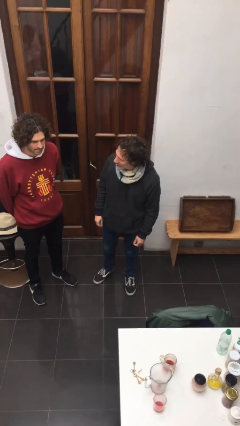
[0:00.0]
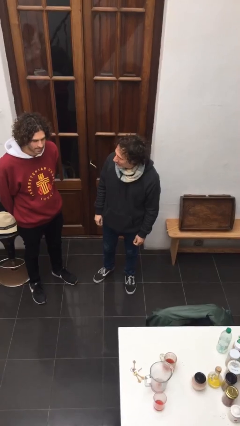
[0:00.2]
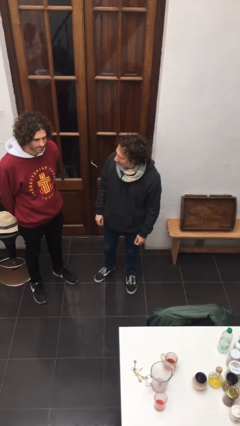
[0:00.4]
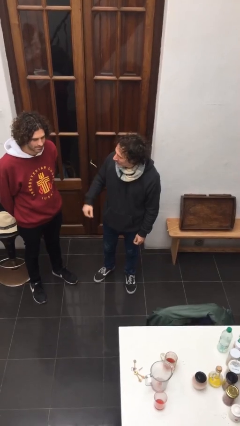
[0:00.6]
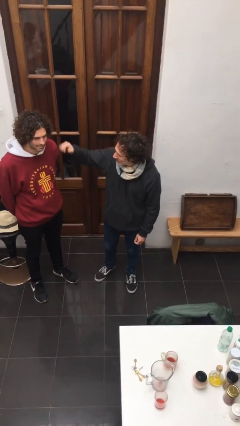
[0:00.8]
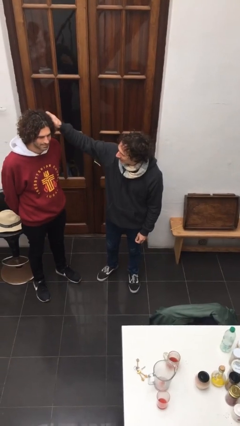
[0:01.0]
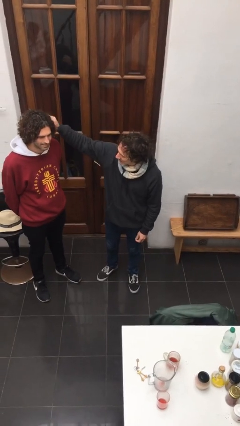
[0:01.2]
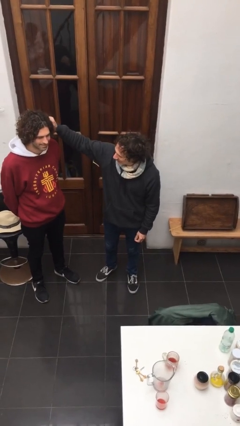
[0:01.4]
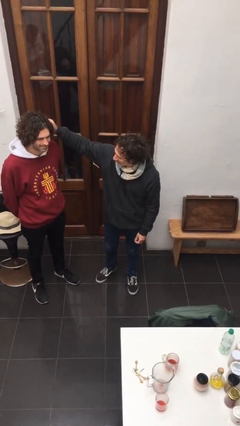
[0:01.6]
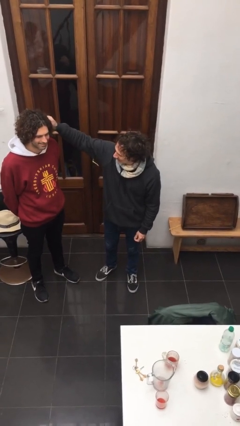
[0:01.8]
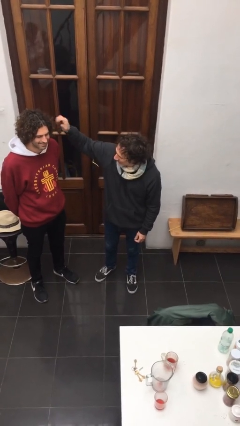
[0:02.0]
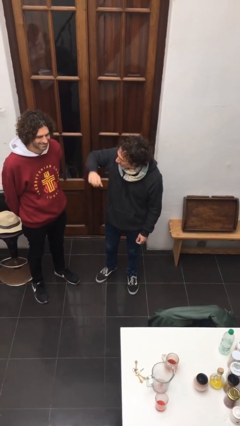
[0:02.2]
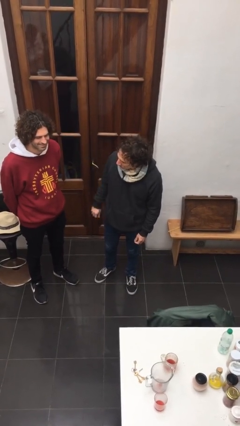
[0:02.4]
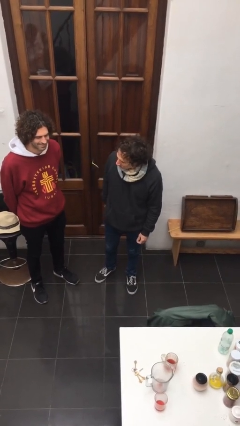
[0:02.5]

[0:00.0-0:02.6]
person grabs person by hair

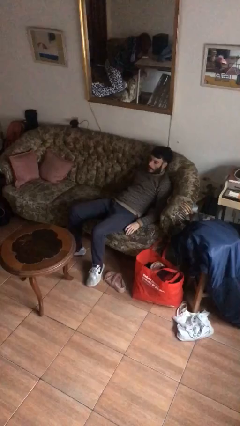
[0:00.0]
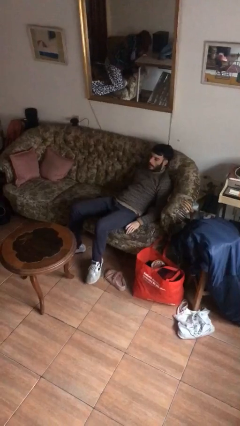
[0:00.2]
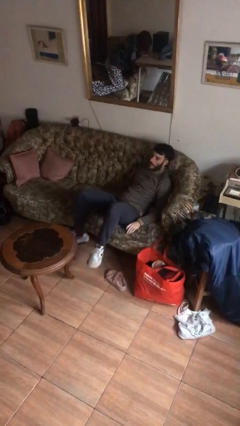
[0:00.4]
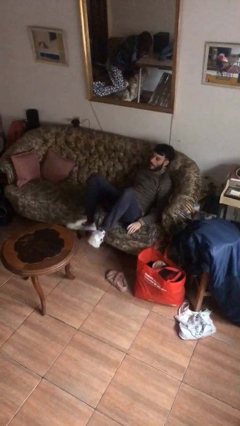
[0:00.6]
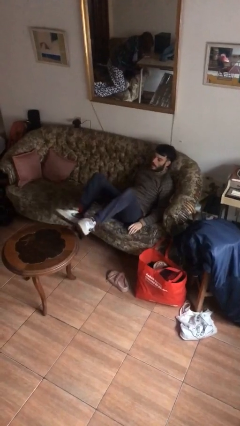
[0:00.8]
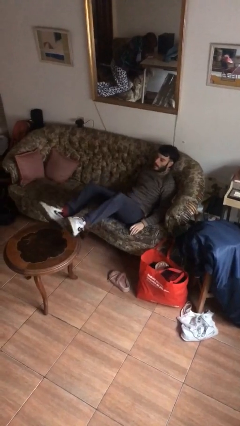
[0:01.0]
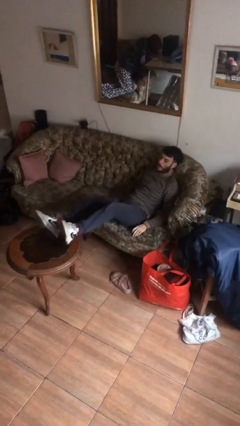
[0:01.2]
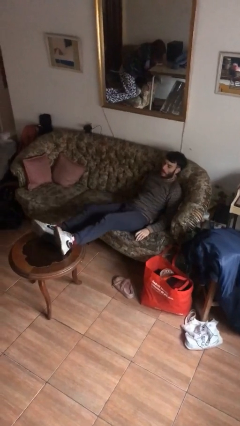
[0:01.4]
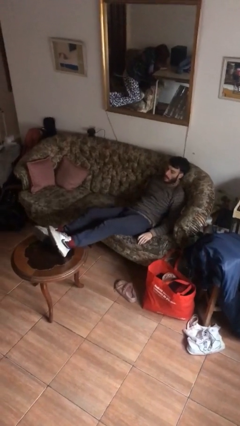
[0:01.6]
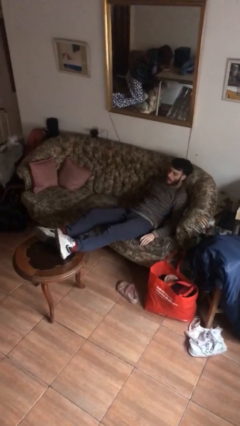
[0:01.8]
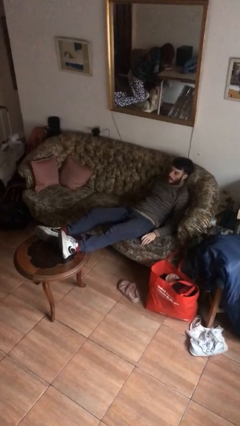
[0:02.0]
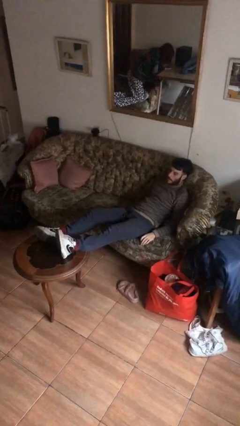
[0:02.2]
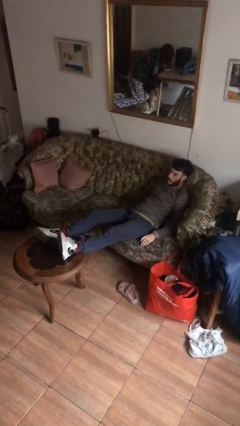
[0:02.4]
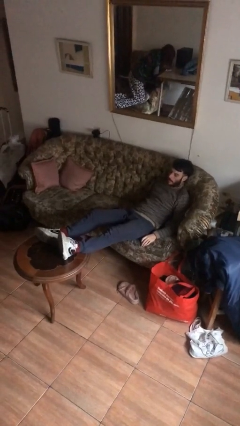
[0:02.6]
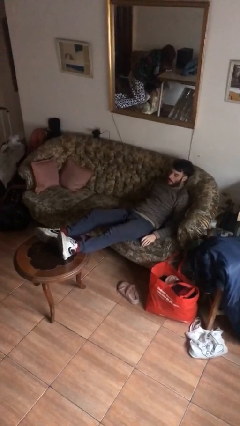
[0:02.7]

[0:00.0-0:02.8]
person puts feet up

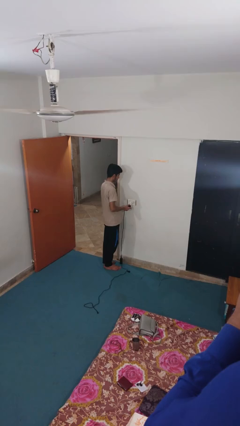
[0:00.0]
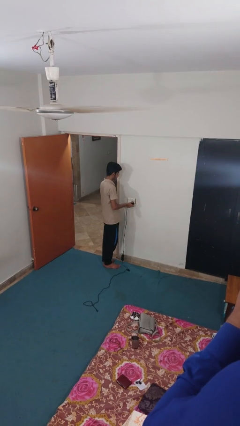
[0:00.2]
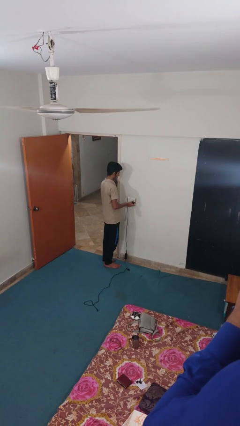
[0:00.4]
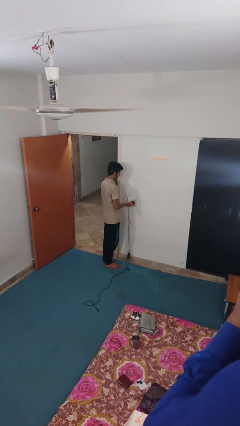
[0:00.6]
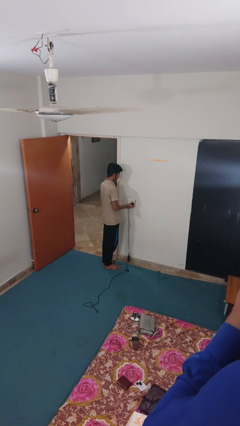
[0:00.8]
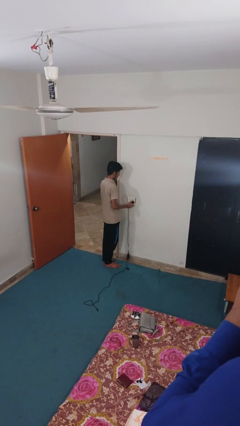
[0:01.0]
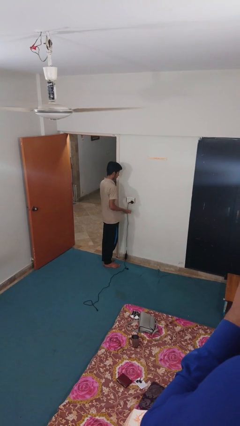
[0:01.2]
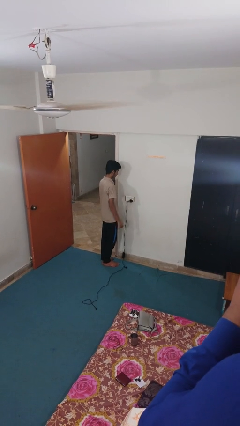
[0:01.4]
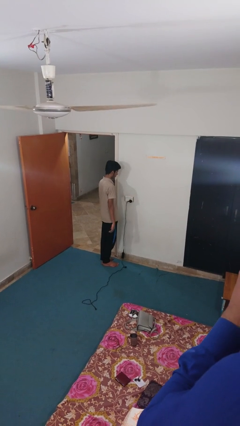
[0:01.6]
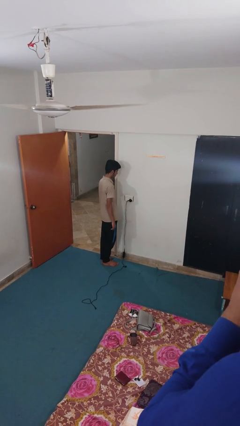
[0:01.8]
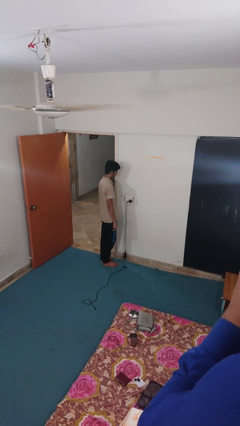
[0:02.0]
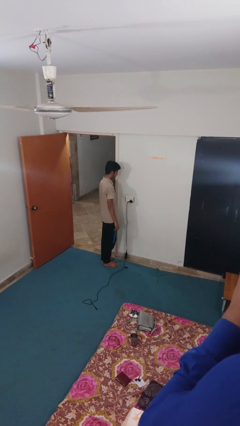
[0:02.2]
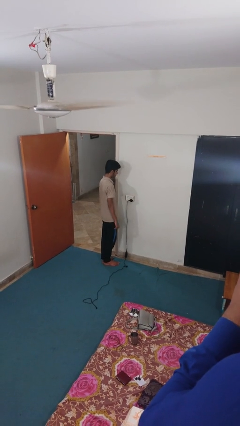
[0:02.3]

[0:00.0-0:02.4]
person plugs into electrical socket

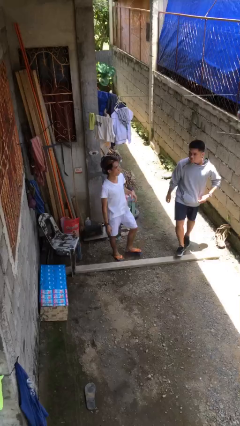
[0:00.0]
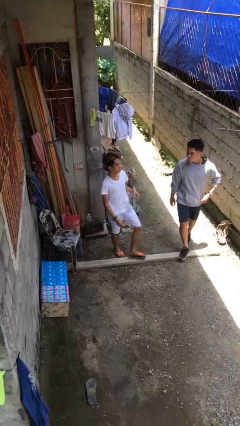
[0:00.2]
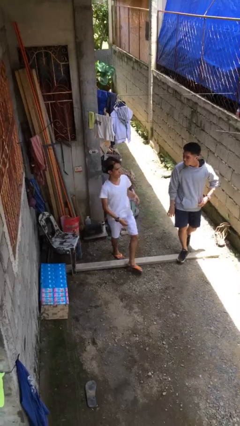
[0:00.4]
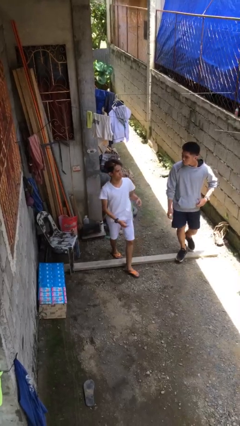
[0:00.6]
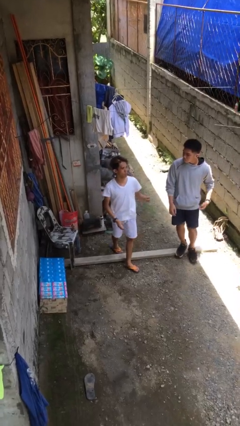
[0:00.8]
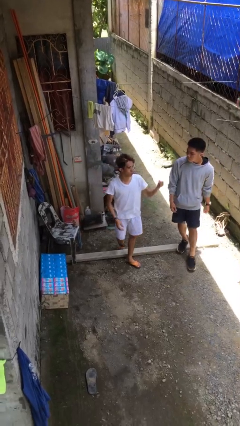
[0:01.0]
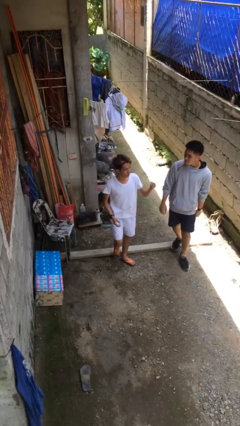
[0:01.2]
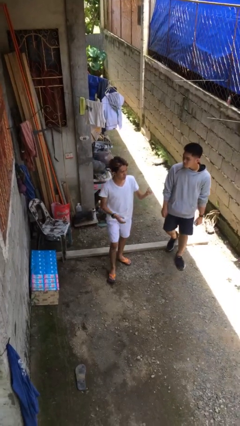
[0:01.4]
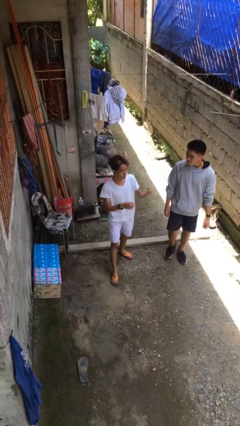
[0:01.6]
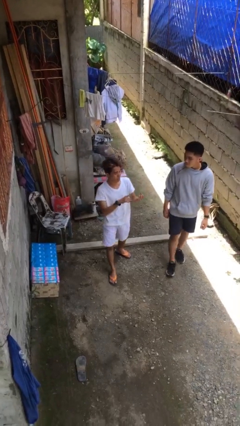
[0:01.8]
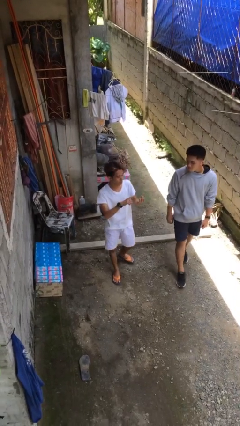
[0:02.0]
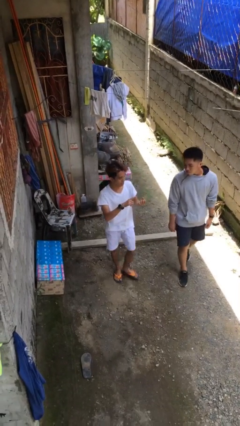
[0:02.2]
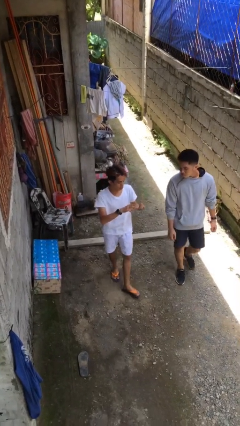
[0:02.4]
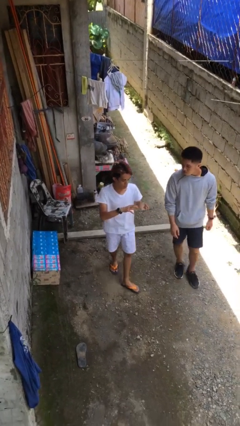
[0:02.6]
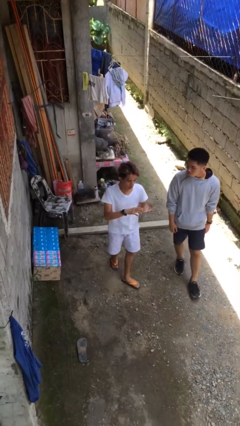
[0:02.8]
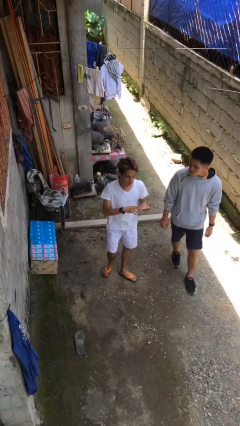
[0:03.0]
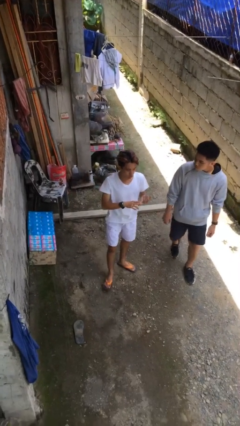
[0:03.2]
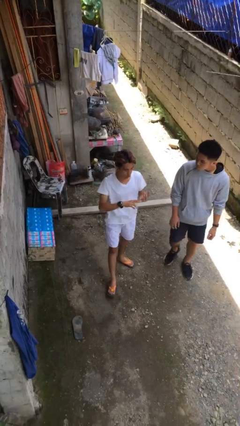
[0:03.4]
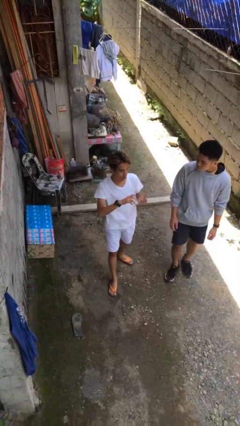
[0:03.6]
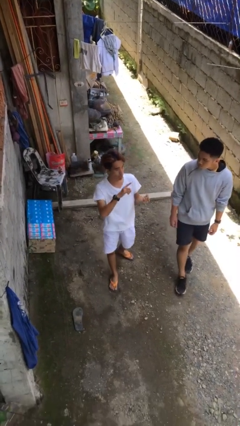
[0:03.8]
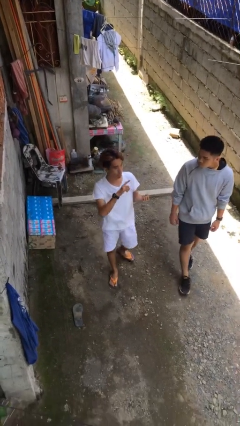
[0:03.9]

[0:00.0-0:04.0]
person talks to person

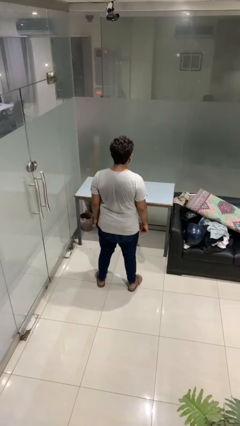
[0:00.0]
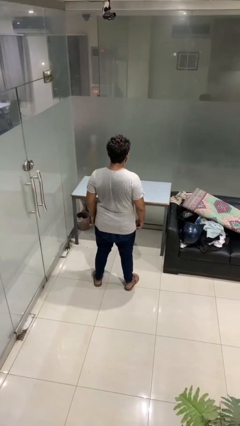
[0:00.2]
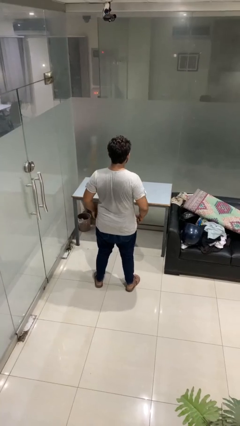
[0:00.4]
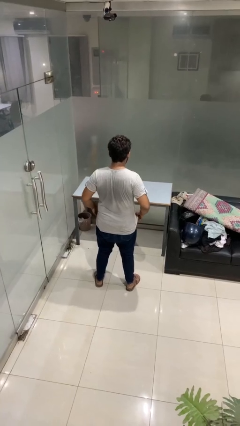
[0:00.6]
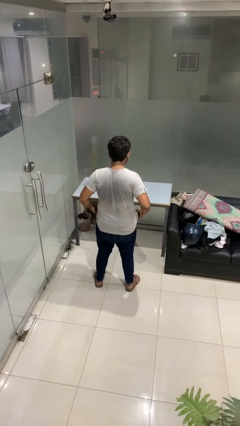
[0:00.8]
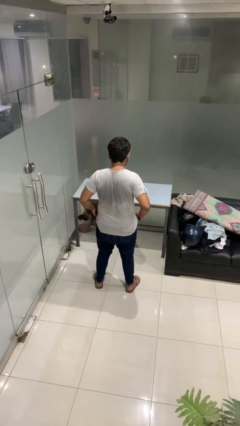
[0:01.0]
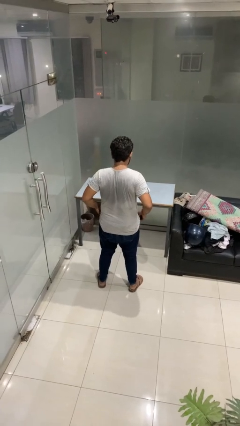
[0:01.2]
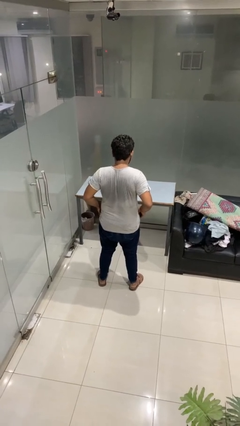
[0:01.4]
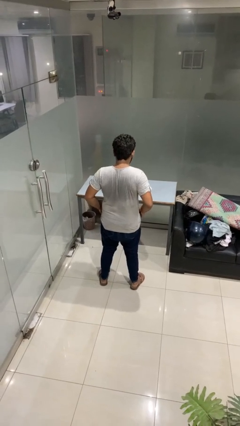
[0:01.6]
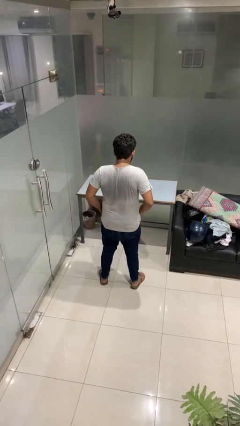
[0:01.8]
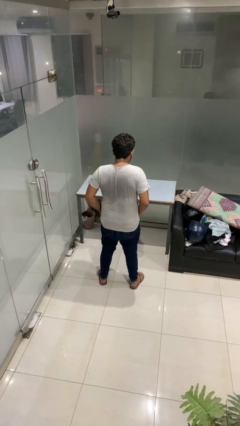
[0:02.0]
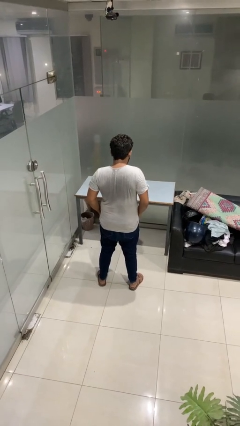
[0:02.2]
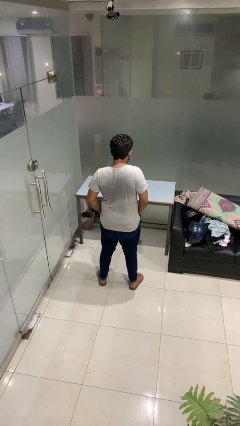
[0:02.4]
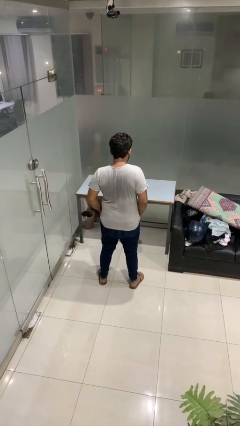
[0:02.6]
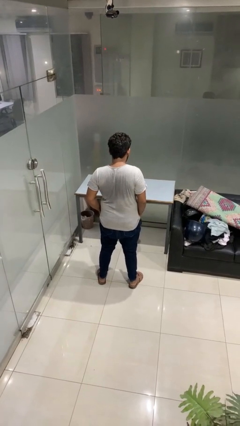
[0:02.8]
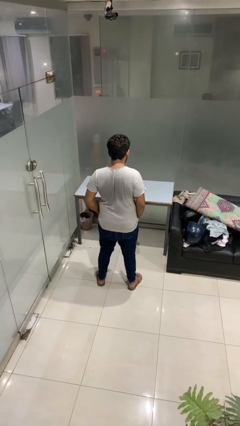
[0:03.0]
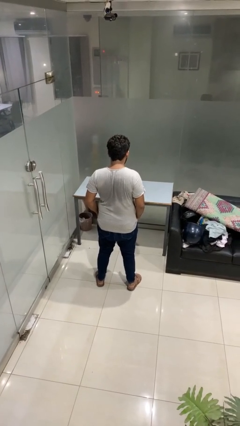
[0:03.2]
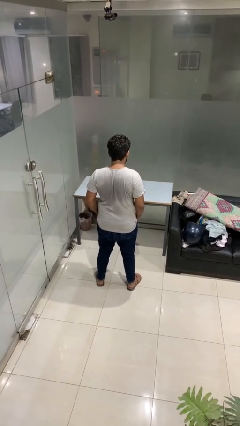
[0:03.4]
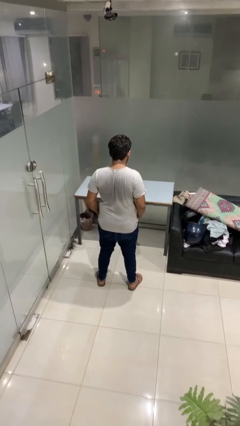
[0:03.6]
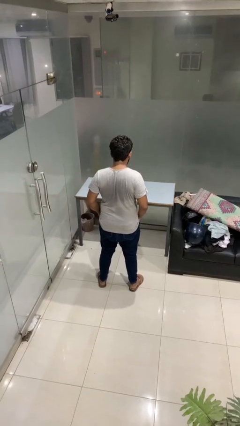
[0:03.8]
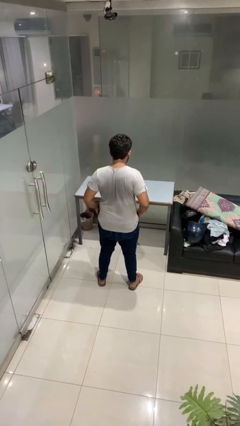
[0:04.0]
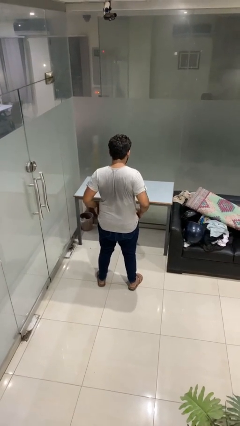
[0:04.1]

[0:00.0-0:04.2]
person puts hands in back pockets

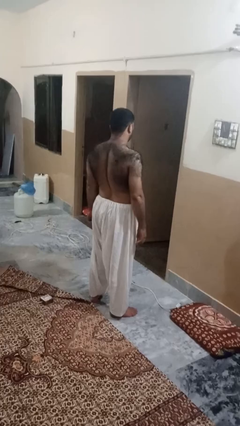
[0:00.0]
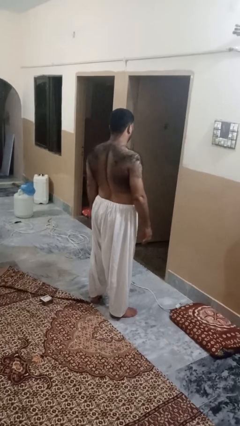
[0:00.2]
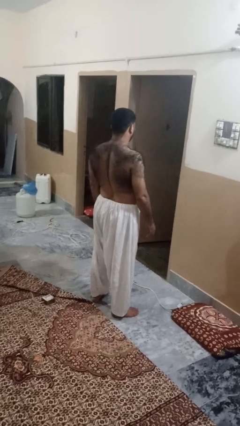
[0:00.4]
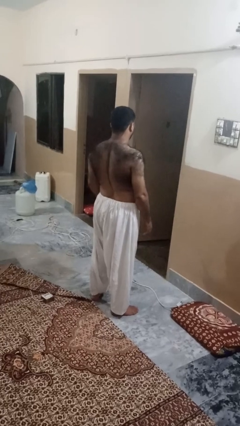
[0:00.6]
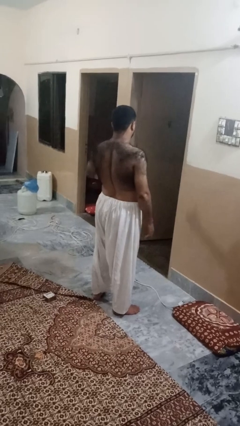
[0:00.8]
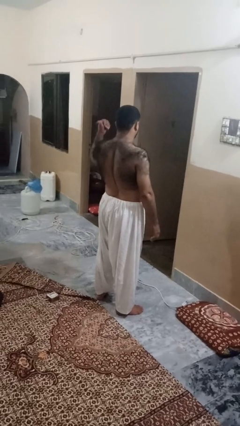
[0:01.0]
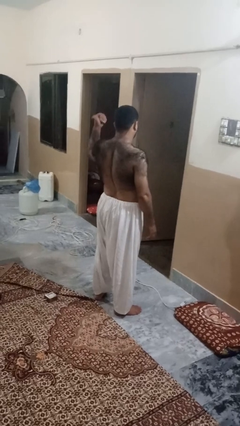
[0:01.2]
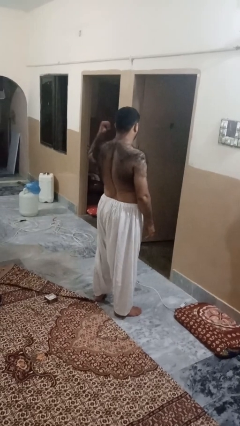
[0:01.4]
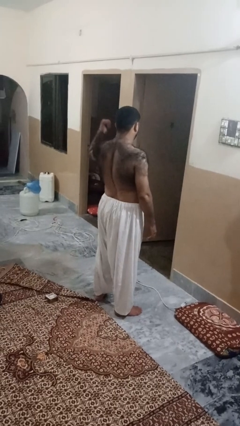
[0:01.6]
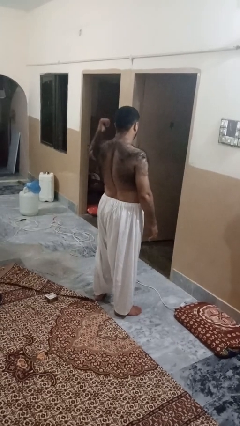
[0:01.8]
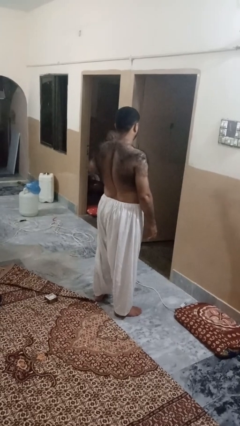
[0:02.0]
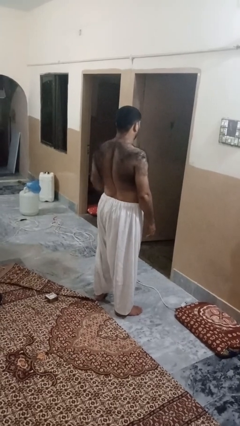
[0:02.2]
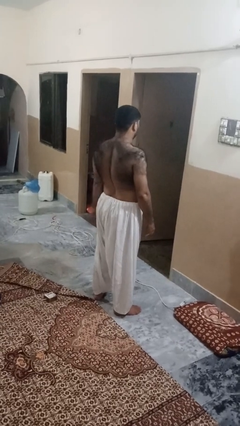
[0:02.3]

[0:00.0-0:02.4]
person gestures behind me
